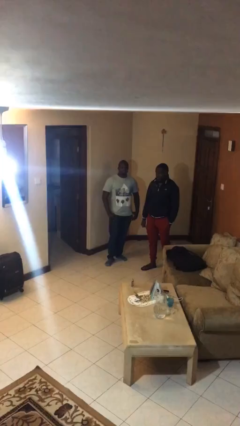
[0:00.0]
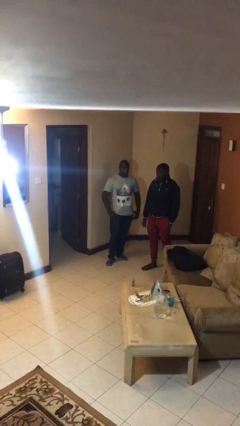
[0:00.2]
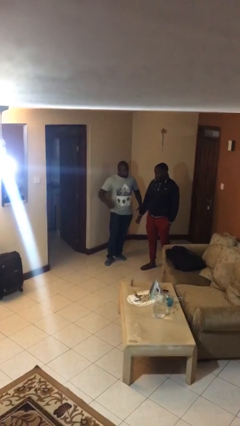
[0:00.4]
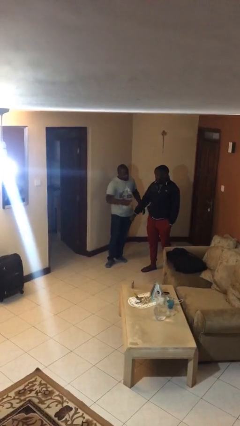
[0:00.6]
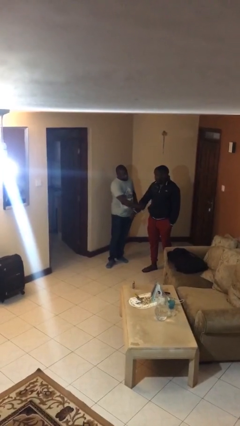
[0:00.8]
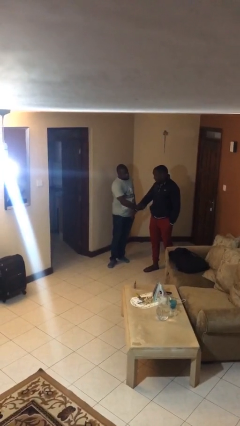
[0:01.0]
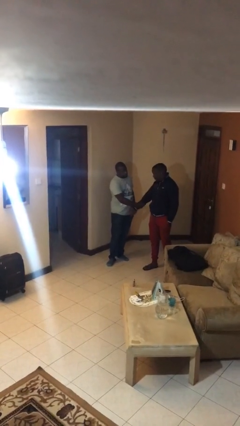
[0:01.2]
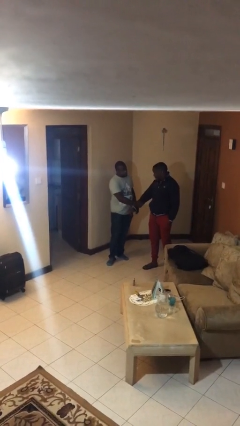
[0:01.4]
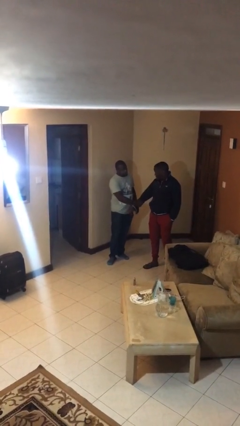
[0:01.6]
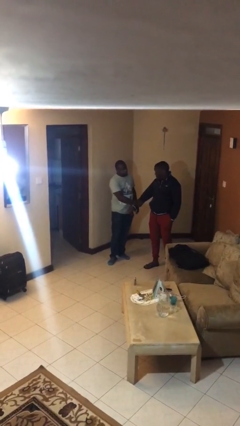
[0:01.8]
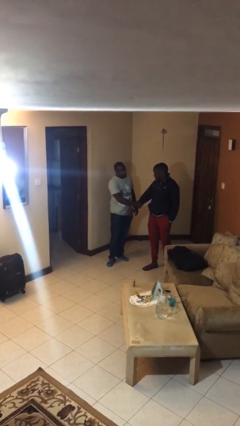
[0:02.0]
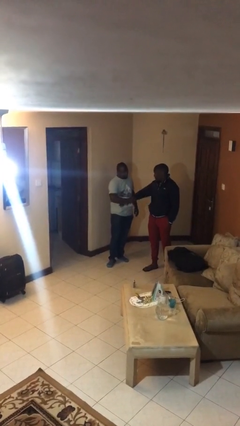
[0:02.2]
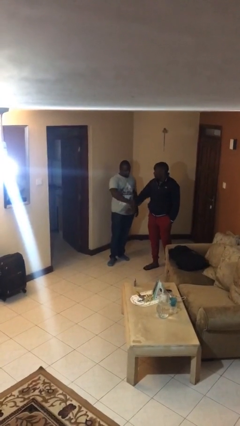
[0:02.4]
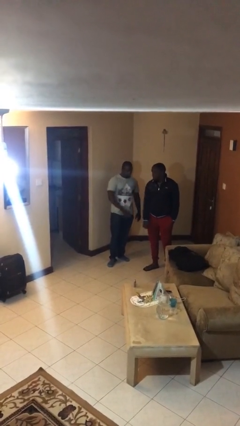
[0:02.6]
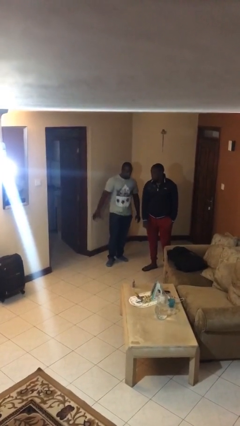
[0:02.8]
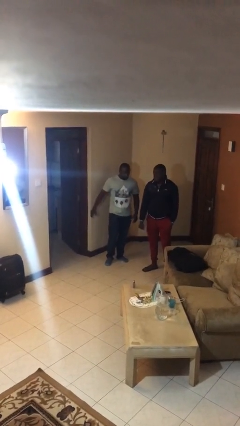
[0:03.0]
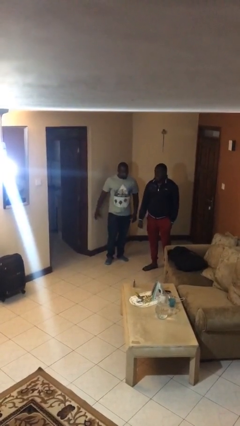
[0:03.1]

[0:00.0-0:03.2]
person grabs person by forearm

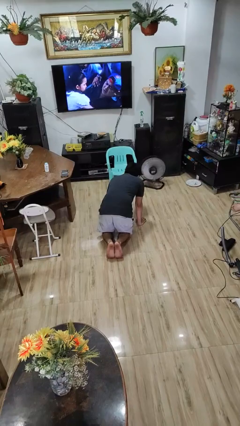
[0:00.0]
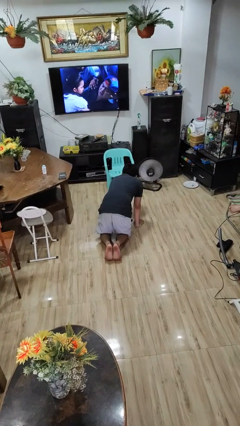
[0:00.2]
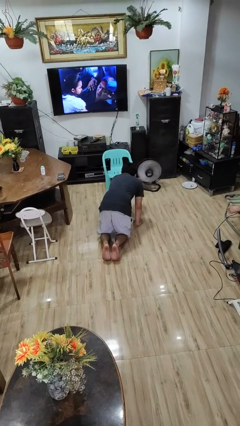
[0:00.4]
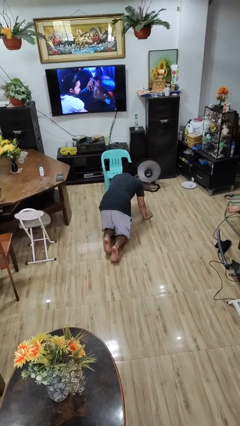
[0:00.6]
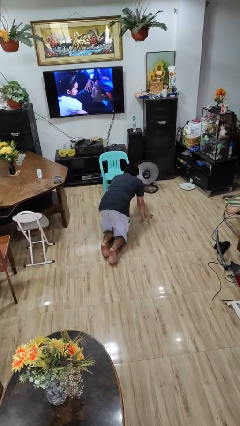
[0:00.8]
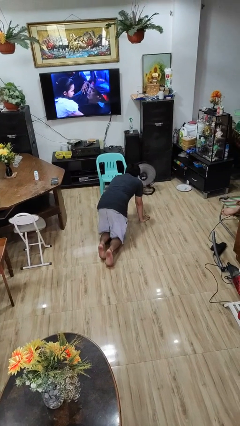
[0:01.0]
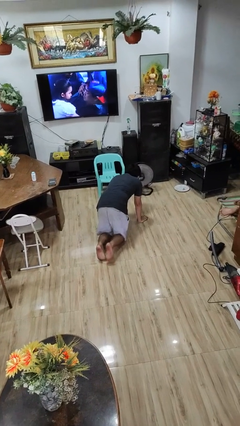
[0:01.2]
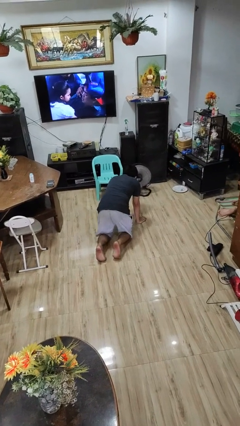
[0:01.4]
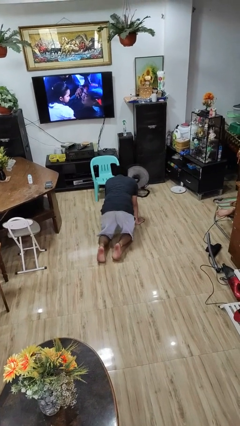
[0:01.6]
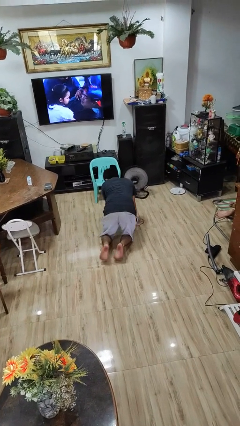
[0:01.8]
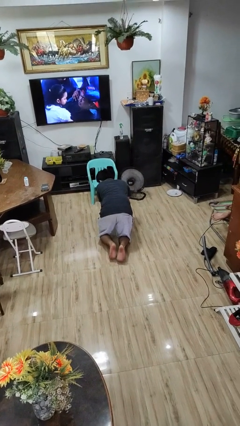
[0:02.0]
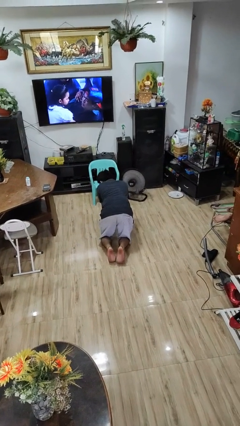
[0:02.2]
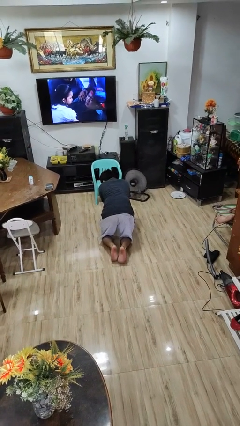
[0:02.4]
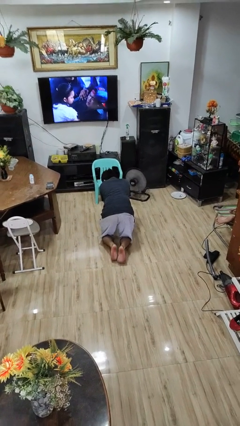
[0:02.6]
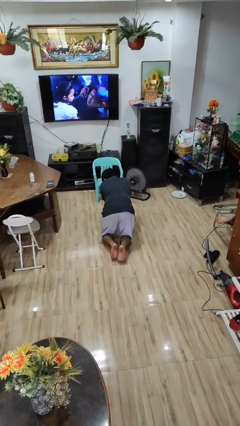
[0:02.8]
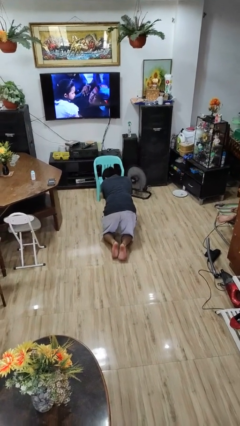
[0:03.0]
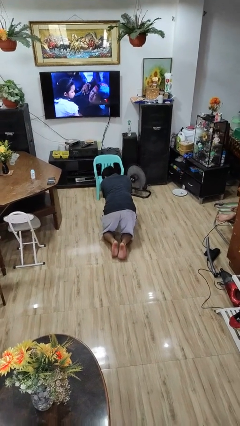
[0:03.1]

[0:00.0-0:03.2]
person crawls

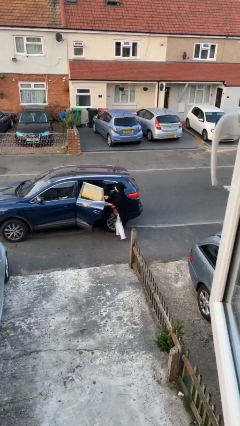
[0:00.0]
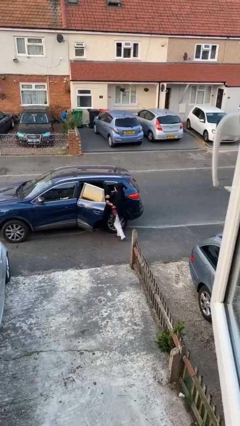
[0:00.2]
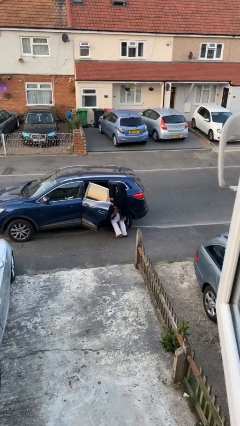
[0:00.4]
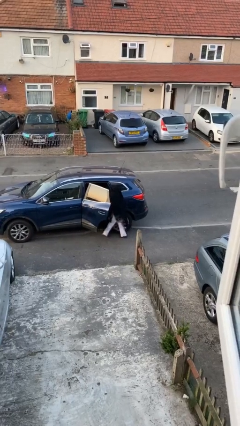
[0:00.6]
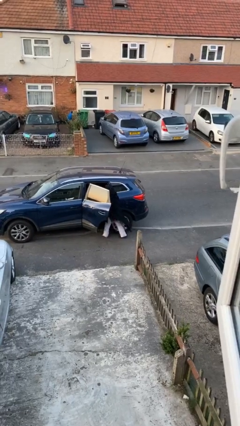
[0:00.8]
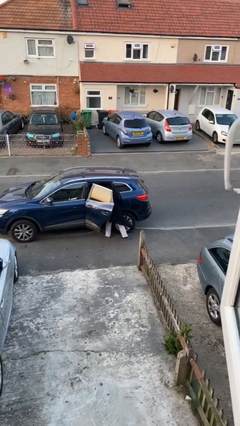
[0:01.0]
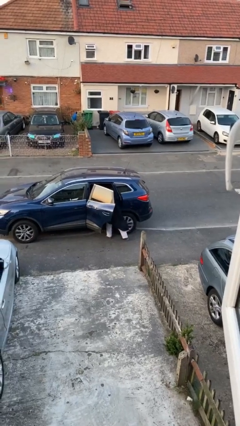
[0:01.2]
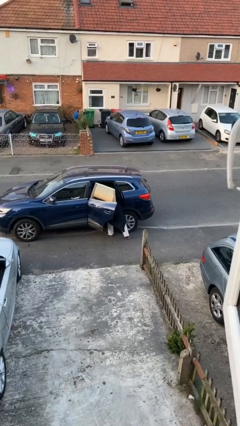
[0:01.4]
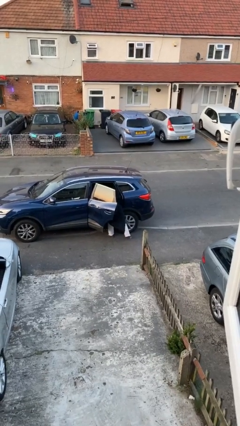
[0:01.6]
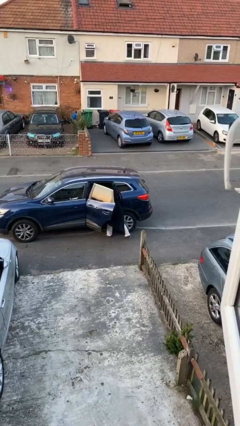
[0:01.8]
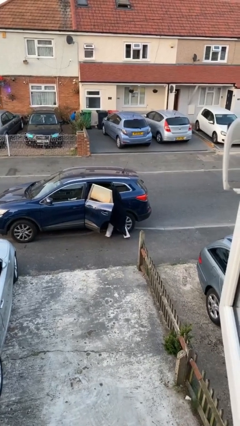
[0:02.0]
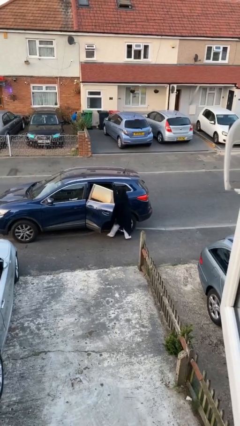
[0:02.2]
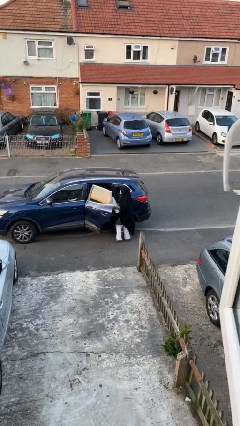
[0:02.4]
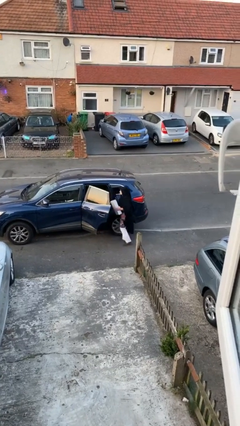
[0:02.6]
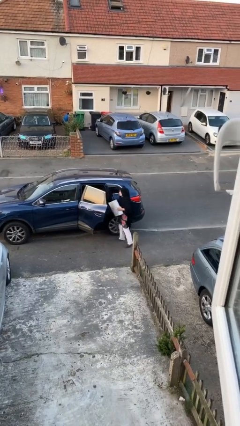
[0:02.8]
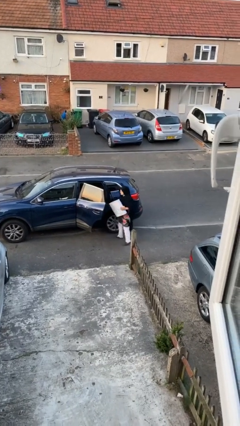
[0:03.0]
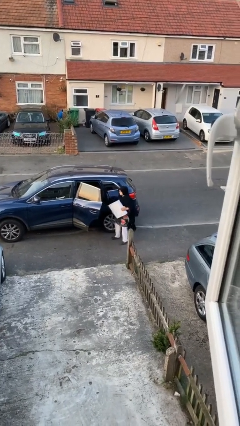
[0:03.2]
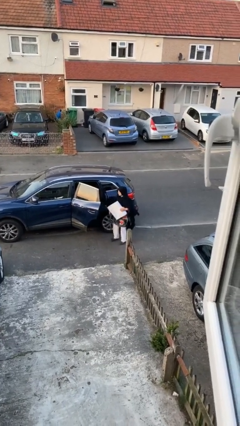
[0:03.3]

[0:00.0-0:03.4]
person unloads car

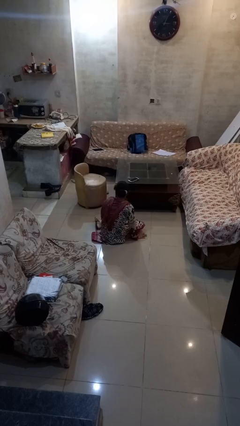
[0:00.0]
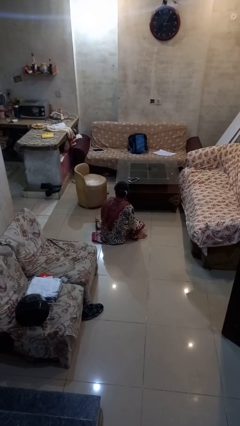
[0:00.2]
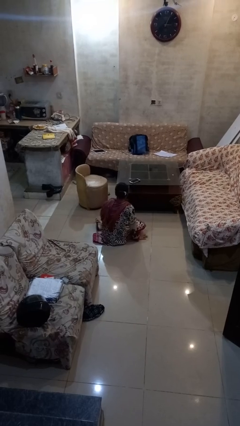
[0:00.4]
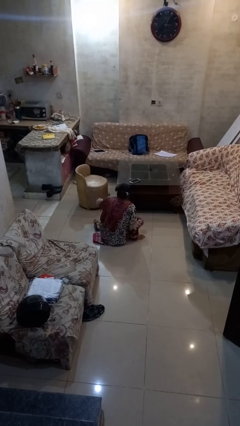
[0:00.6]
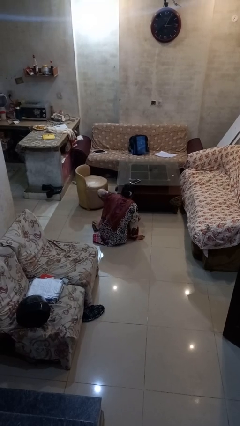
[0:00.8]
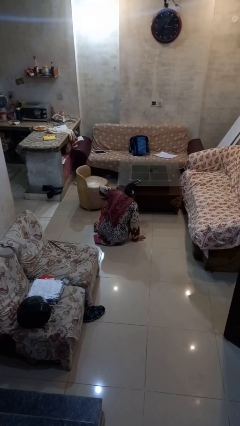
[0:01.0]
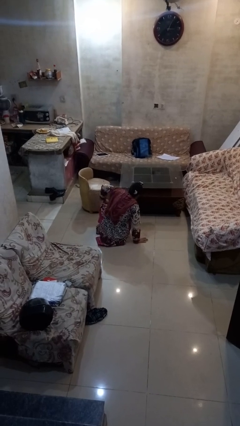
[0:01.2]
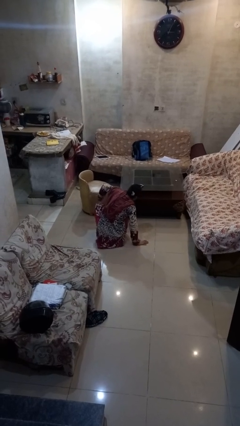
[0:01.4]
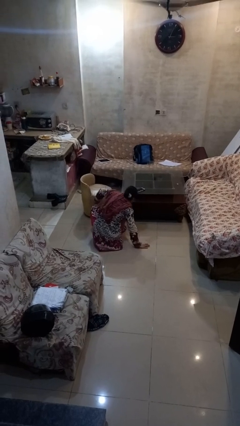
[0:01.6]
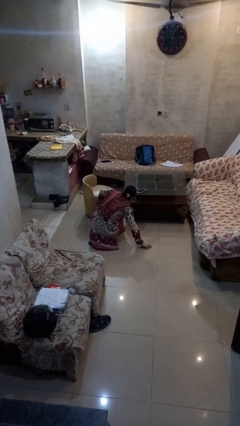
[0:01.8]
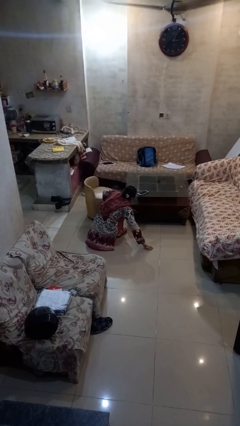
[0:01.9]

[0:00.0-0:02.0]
person stands up from floor

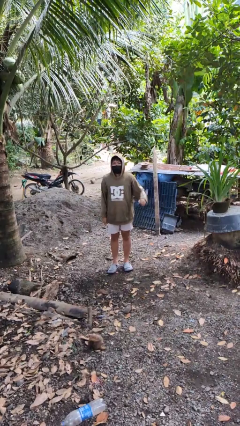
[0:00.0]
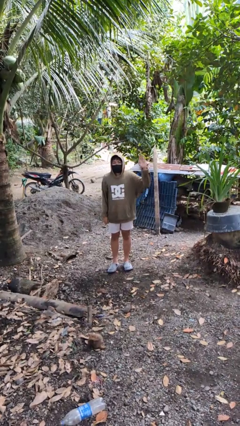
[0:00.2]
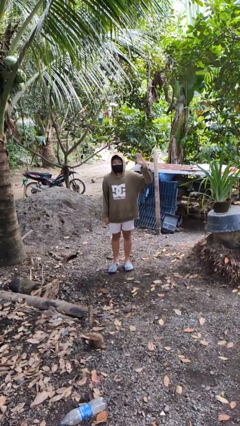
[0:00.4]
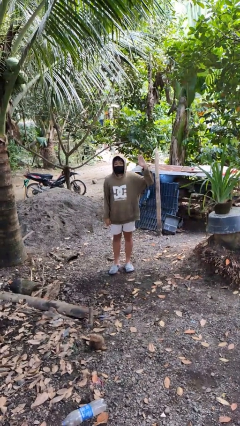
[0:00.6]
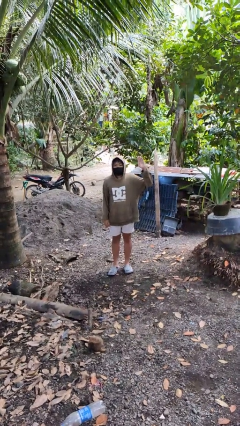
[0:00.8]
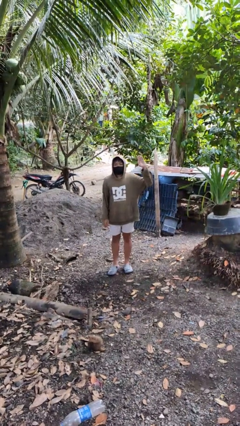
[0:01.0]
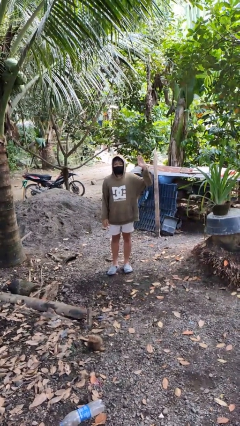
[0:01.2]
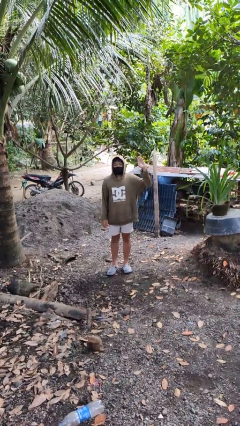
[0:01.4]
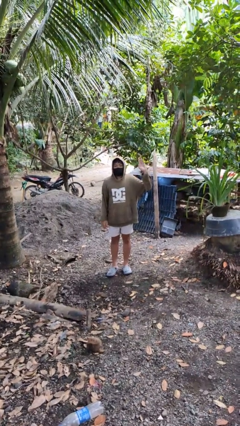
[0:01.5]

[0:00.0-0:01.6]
person gestures number five

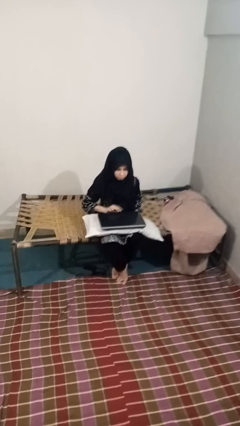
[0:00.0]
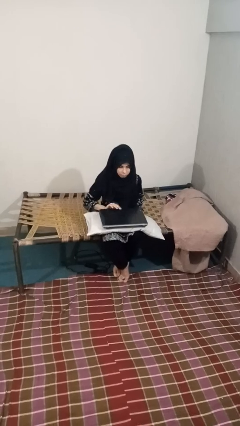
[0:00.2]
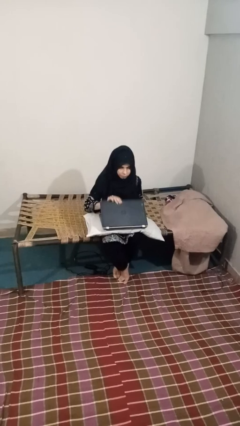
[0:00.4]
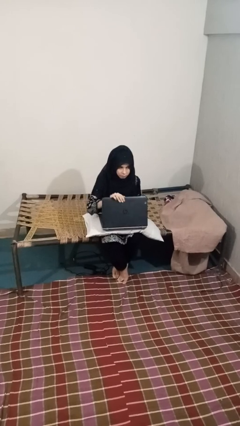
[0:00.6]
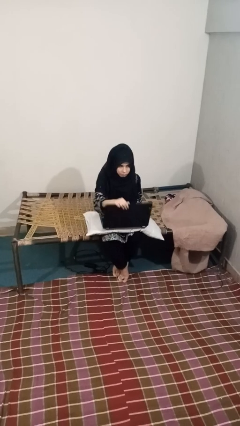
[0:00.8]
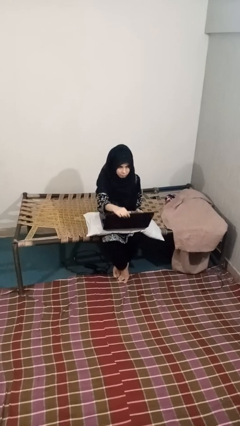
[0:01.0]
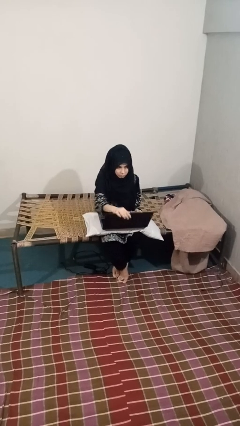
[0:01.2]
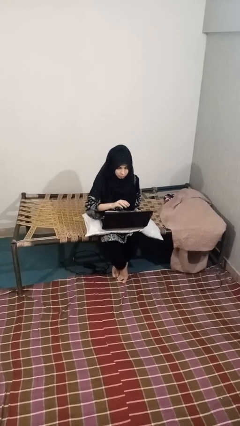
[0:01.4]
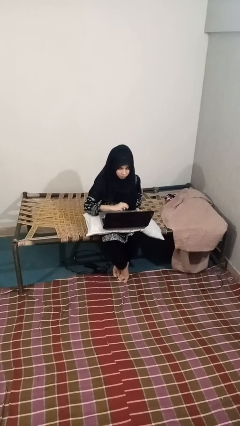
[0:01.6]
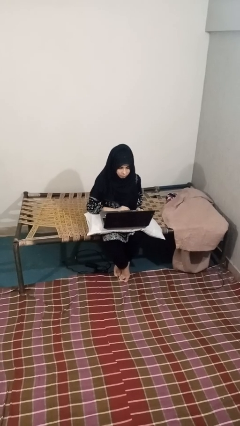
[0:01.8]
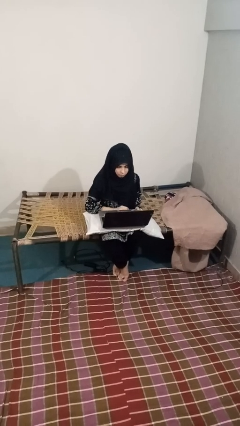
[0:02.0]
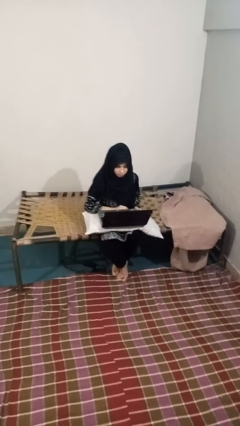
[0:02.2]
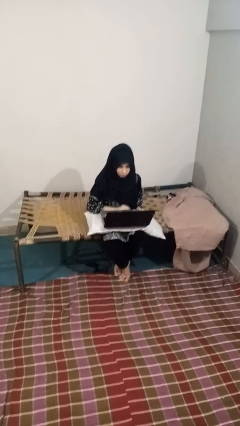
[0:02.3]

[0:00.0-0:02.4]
person opens laptop

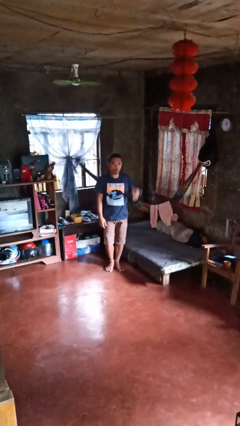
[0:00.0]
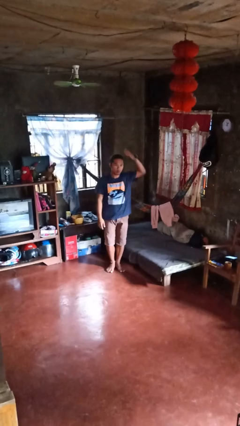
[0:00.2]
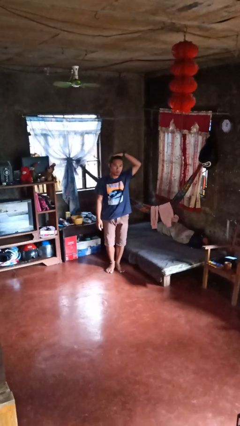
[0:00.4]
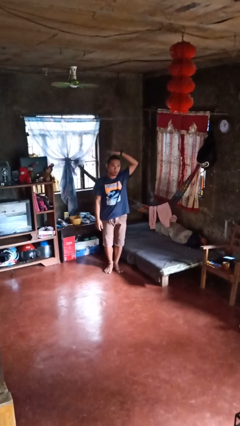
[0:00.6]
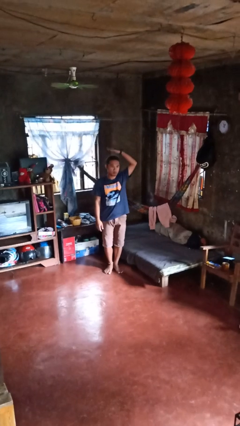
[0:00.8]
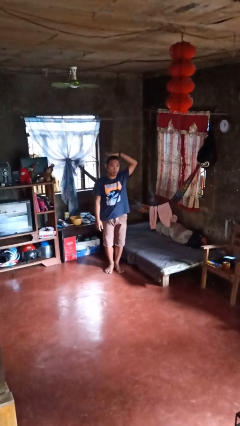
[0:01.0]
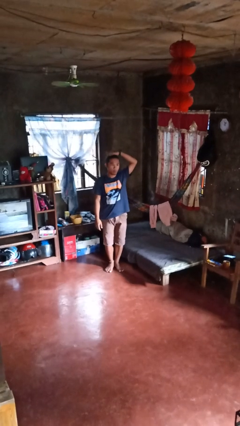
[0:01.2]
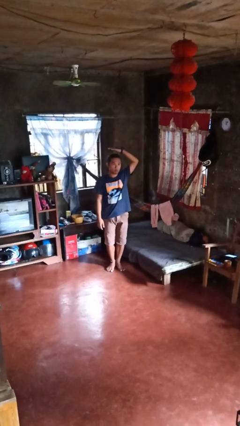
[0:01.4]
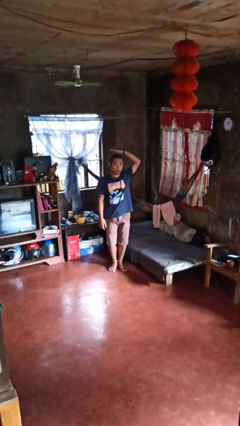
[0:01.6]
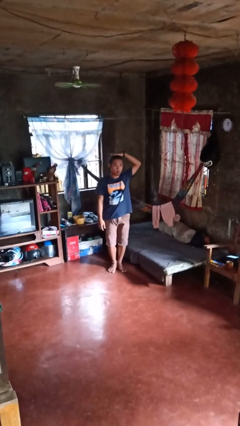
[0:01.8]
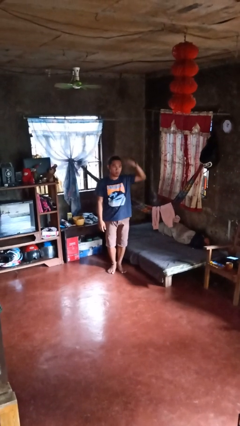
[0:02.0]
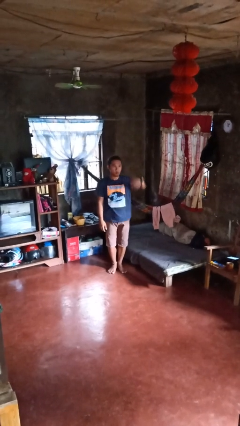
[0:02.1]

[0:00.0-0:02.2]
person pats head
